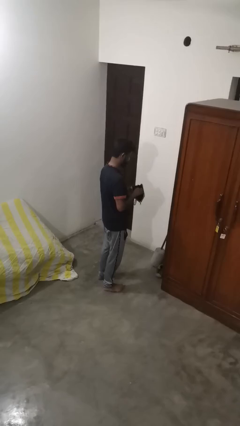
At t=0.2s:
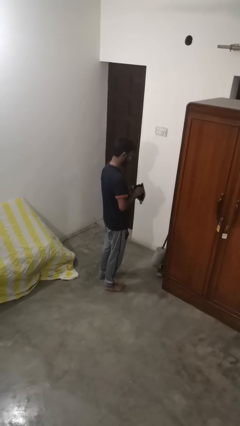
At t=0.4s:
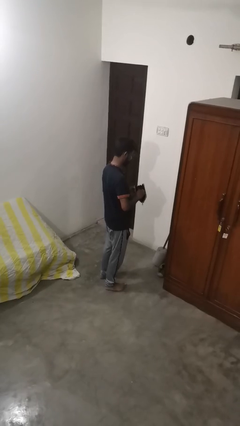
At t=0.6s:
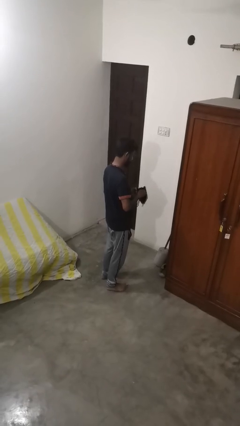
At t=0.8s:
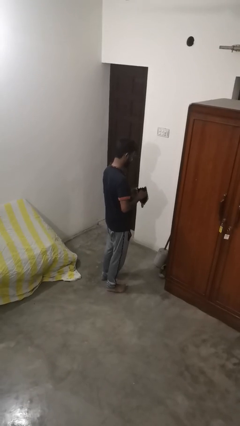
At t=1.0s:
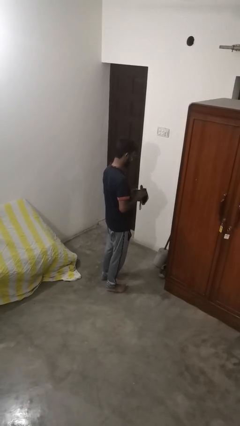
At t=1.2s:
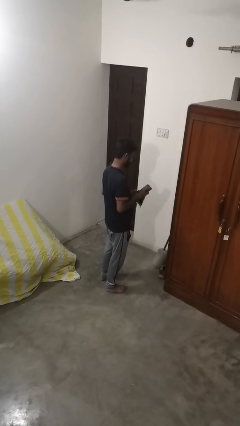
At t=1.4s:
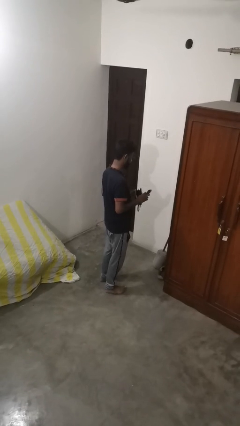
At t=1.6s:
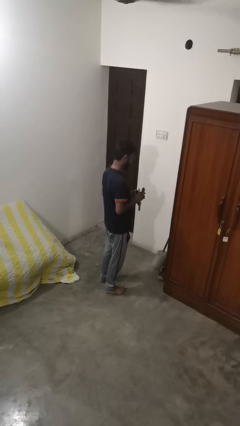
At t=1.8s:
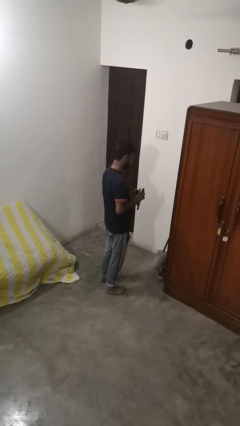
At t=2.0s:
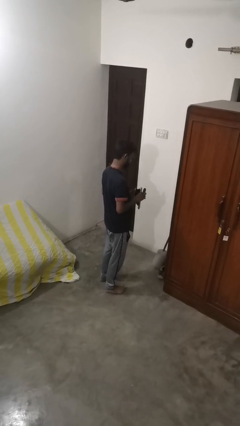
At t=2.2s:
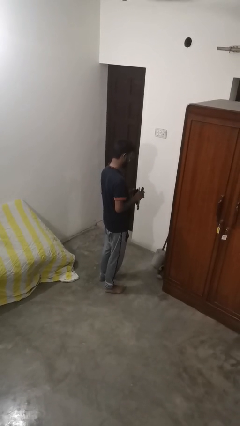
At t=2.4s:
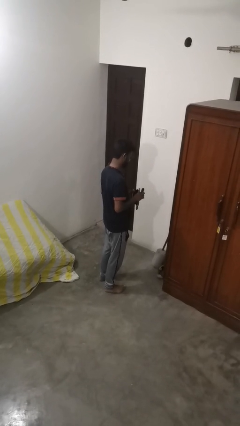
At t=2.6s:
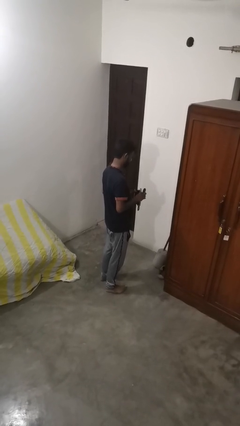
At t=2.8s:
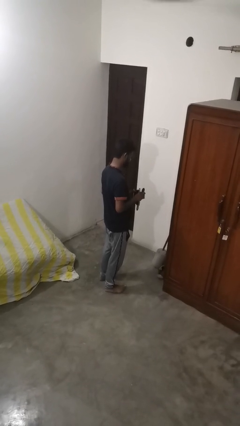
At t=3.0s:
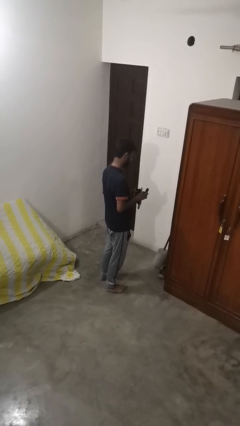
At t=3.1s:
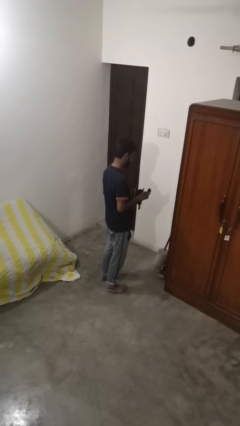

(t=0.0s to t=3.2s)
person takes object from purse

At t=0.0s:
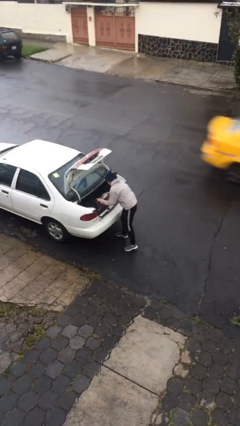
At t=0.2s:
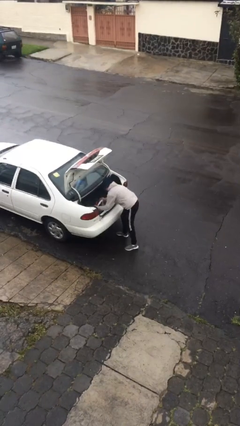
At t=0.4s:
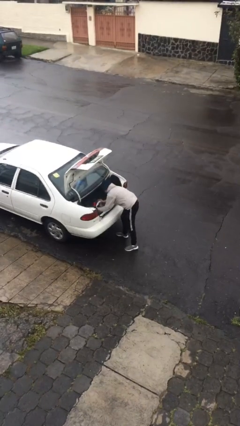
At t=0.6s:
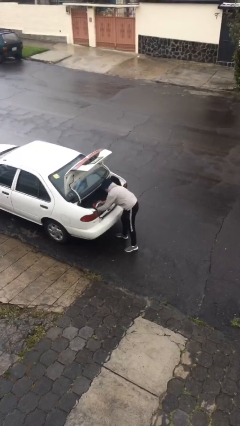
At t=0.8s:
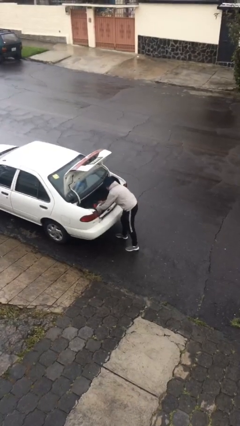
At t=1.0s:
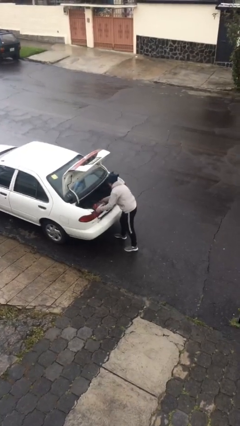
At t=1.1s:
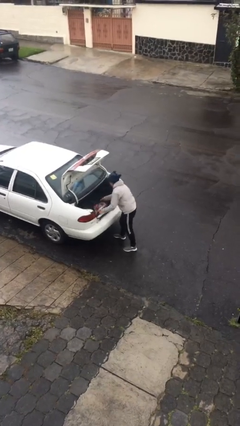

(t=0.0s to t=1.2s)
person loads car

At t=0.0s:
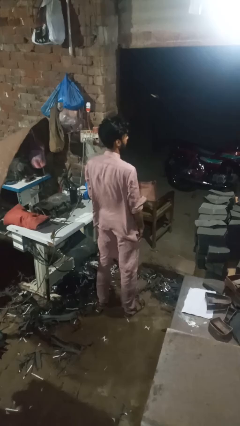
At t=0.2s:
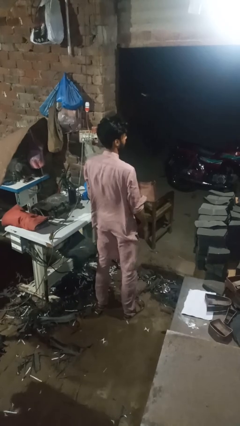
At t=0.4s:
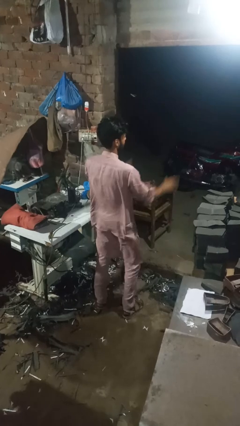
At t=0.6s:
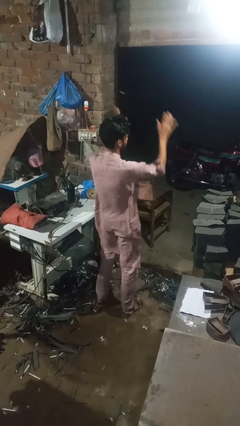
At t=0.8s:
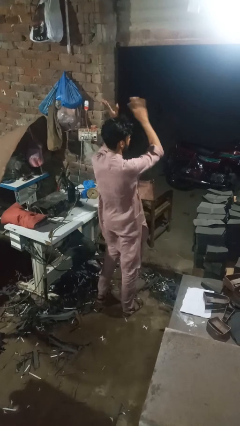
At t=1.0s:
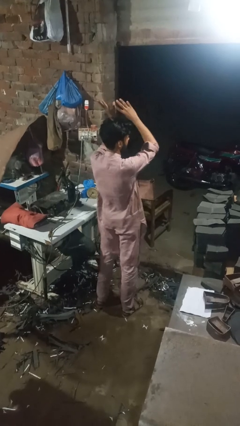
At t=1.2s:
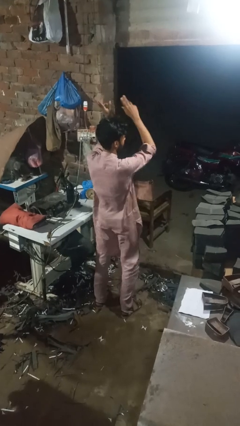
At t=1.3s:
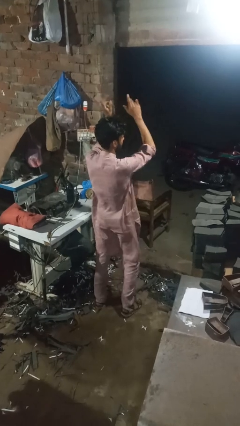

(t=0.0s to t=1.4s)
person dances in place

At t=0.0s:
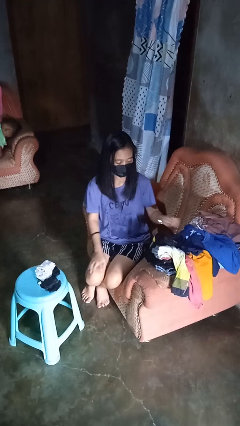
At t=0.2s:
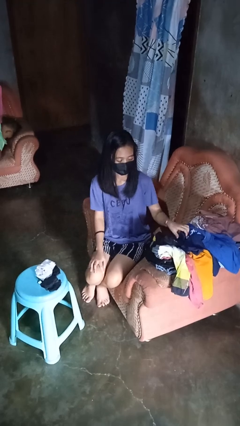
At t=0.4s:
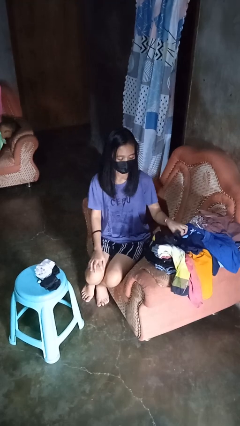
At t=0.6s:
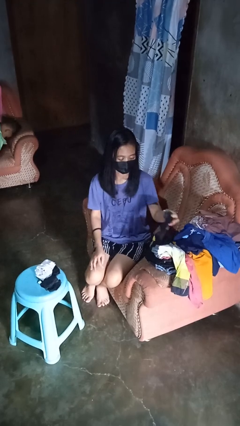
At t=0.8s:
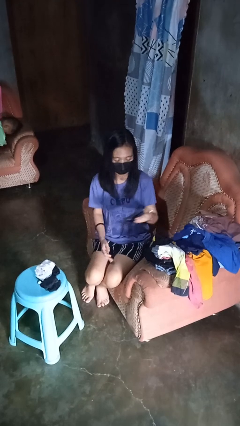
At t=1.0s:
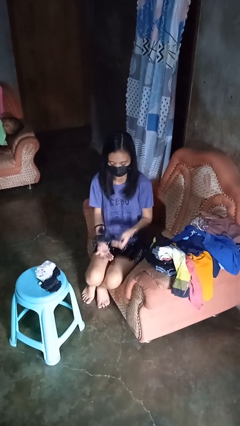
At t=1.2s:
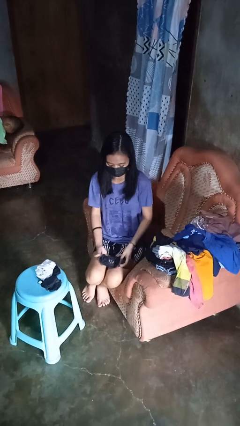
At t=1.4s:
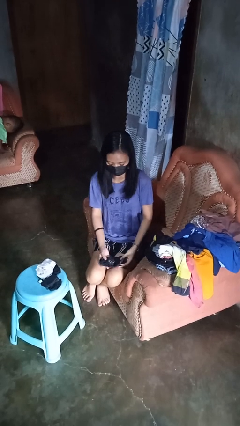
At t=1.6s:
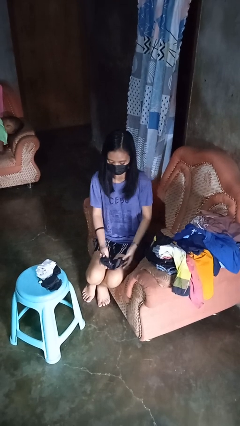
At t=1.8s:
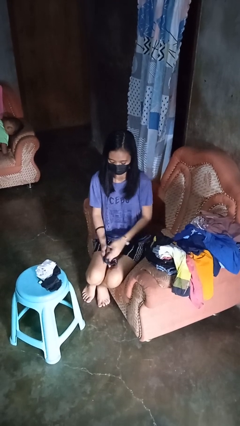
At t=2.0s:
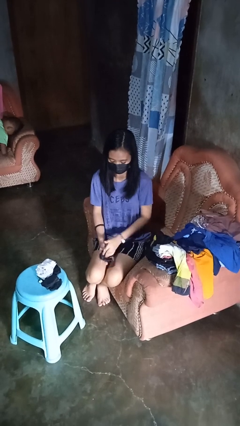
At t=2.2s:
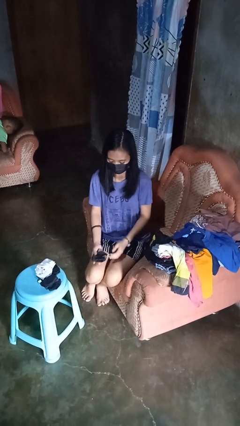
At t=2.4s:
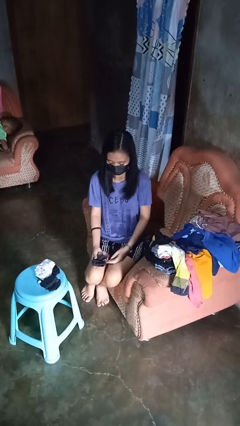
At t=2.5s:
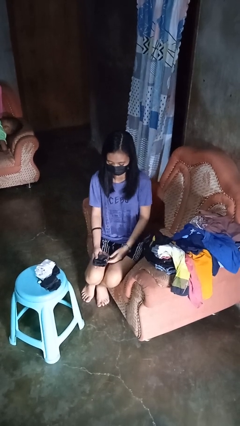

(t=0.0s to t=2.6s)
person folds socks

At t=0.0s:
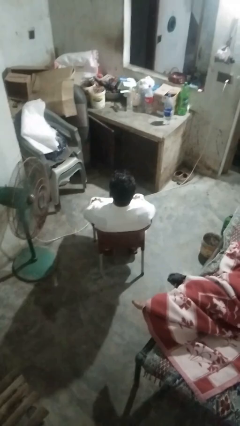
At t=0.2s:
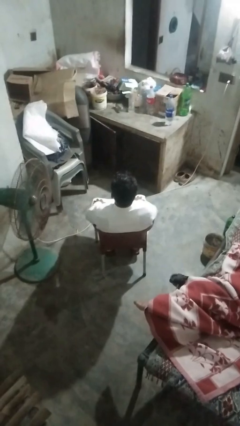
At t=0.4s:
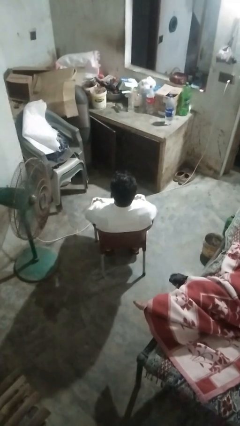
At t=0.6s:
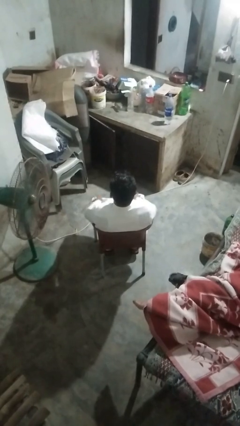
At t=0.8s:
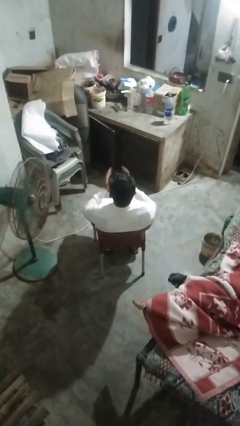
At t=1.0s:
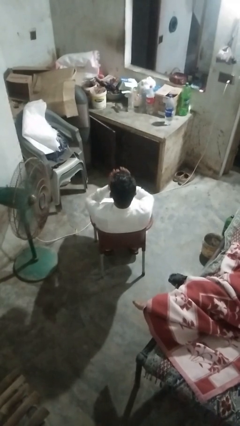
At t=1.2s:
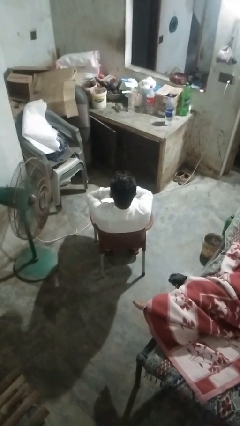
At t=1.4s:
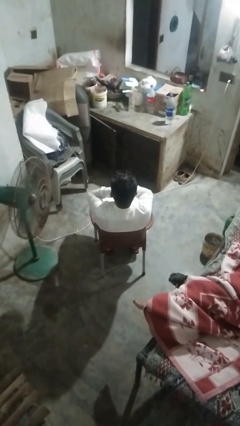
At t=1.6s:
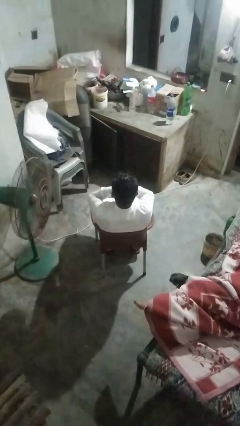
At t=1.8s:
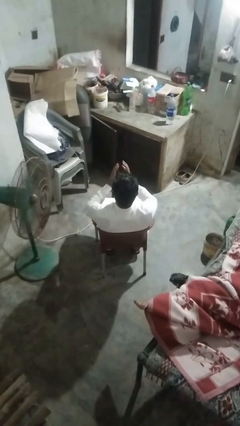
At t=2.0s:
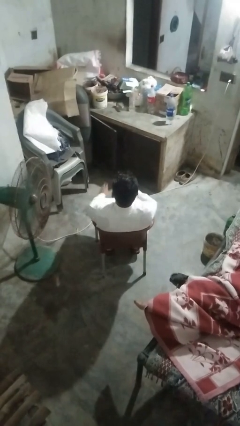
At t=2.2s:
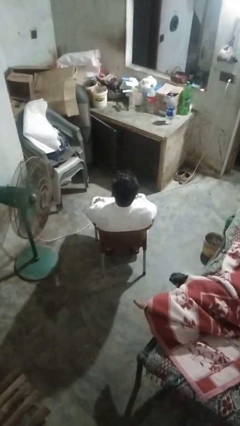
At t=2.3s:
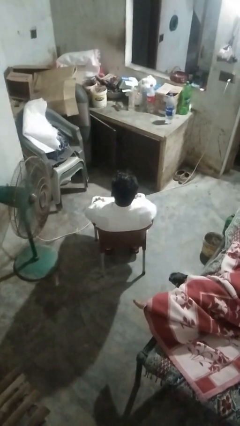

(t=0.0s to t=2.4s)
person yawns

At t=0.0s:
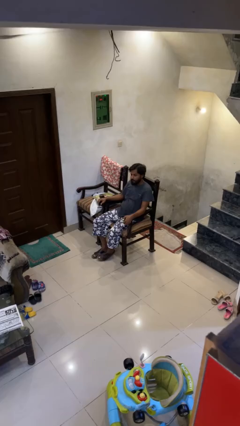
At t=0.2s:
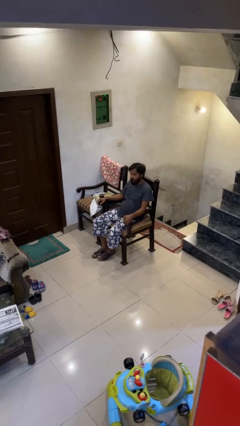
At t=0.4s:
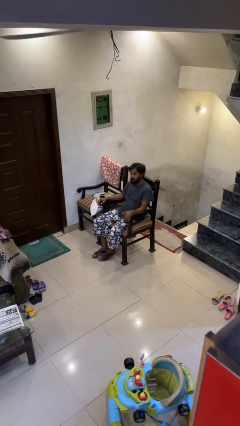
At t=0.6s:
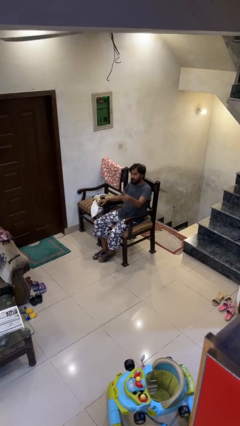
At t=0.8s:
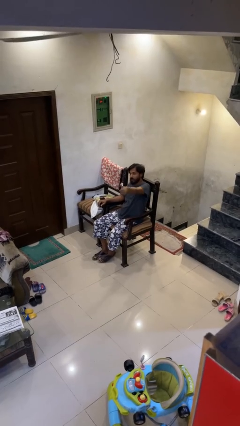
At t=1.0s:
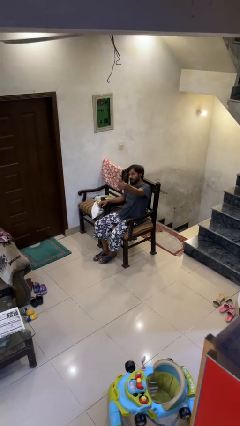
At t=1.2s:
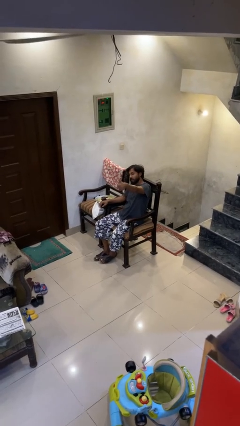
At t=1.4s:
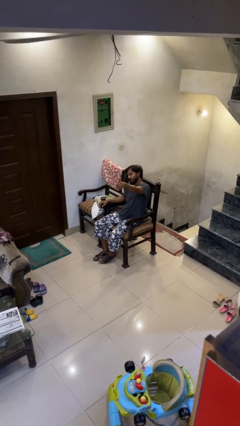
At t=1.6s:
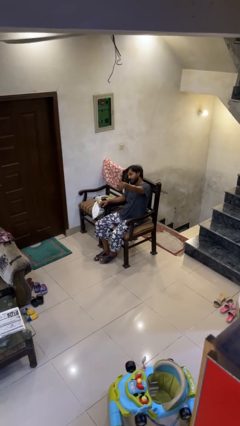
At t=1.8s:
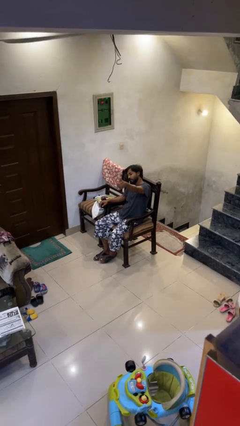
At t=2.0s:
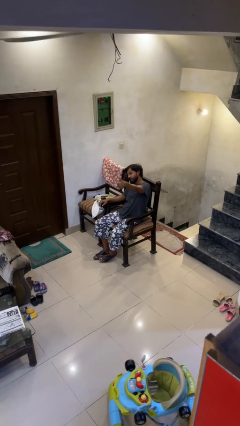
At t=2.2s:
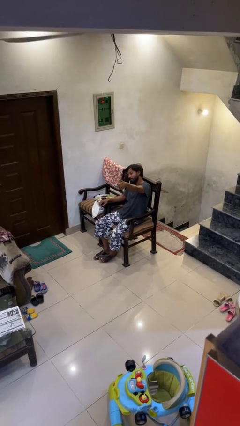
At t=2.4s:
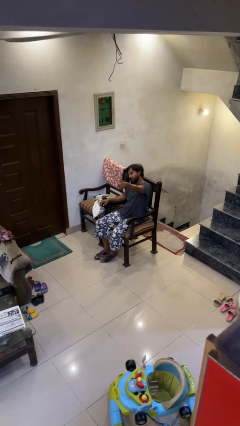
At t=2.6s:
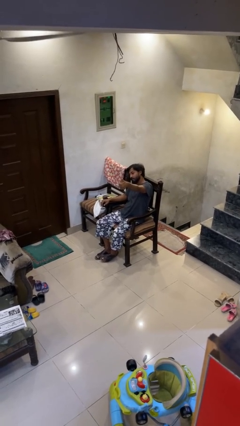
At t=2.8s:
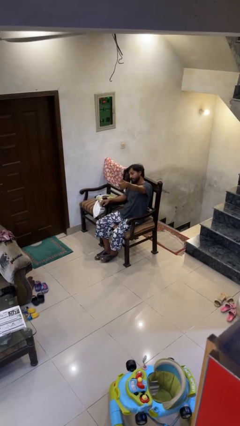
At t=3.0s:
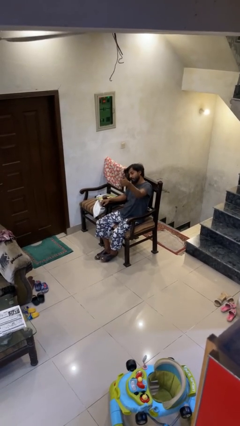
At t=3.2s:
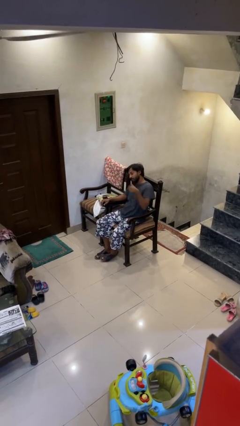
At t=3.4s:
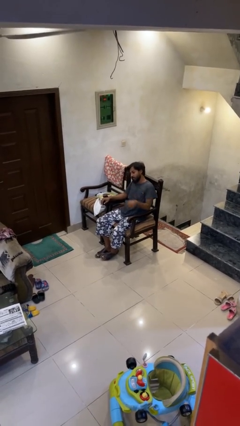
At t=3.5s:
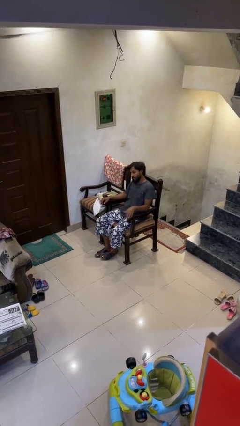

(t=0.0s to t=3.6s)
person gestures thumbs up

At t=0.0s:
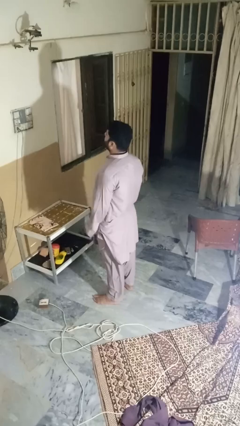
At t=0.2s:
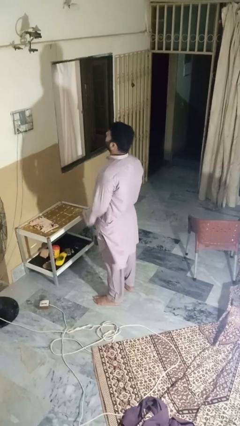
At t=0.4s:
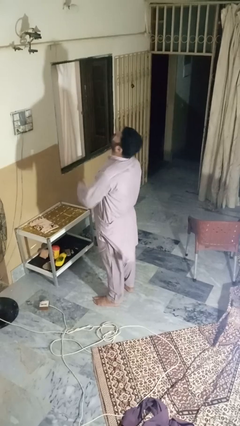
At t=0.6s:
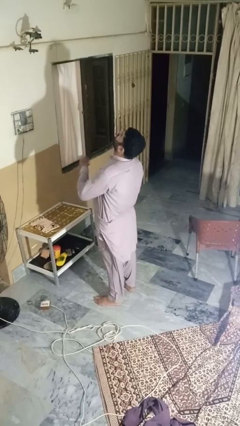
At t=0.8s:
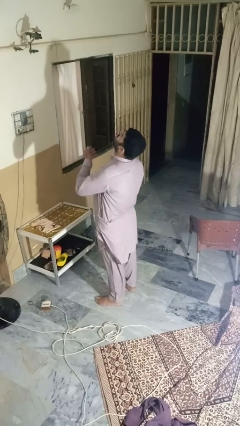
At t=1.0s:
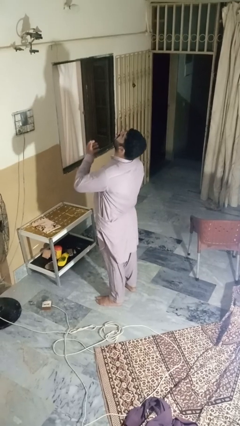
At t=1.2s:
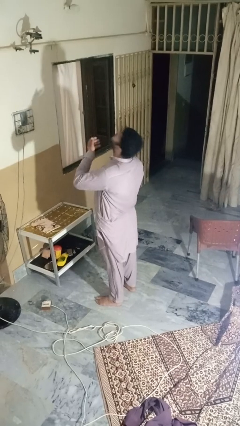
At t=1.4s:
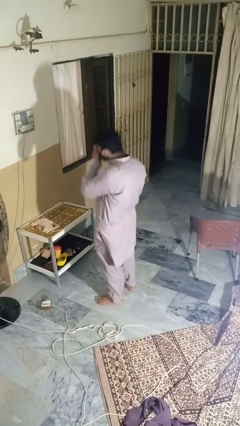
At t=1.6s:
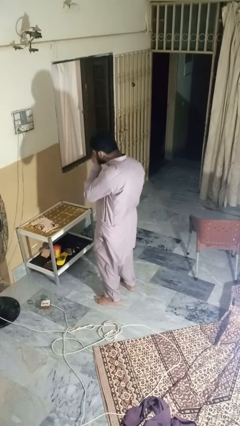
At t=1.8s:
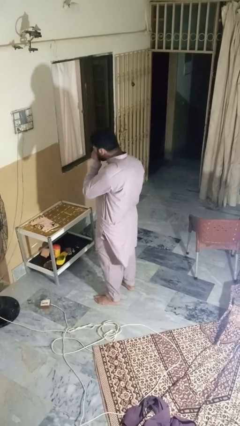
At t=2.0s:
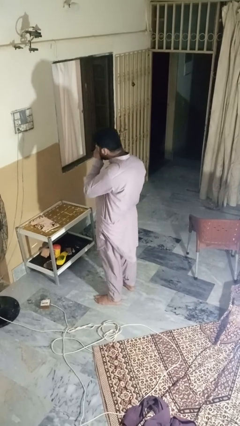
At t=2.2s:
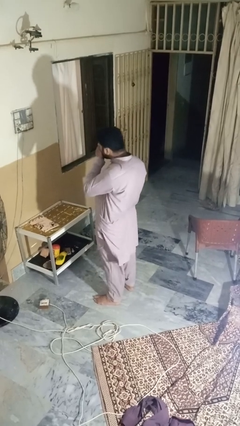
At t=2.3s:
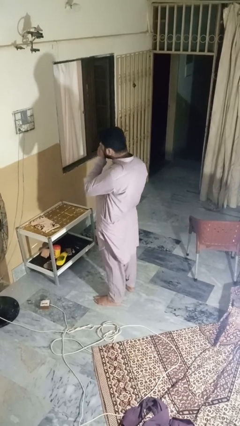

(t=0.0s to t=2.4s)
person sneezes into hand

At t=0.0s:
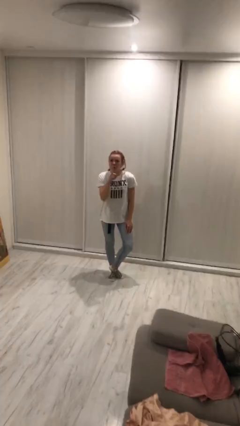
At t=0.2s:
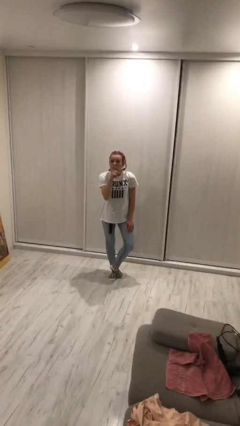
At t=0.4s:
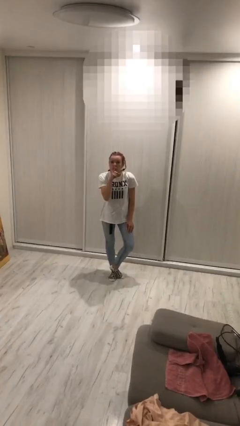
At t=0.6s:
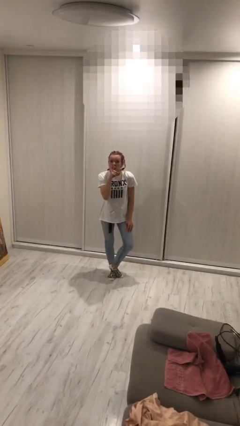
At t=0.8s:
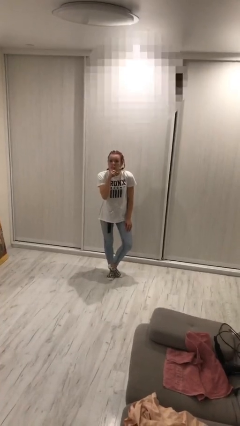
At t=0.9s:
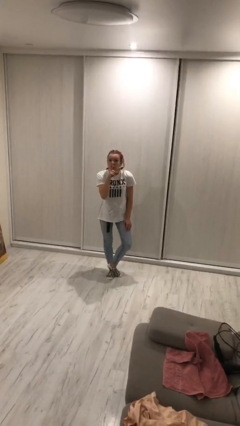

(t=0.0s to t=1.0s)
person gestures be quiet
